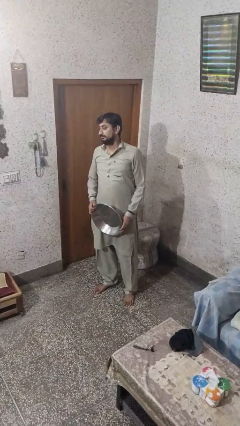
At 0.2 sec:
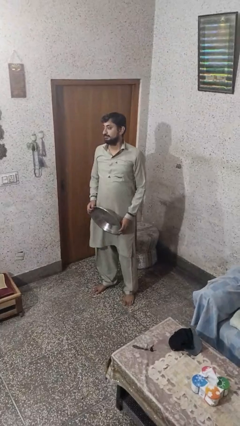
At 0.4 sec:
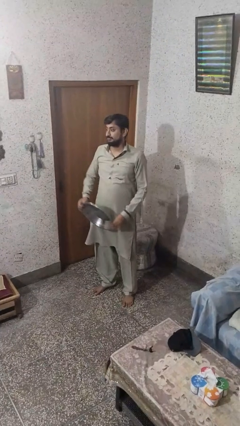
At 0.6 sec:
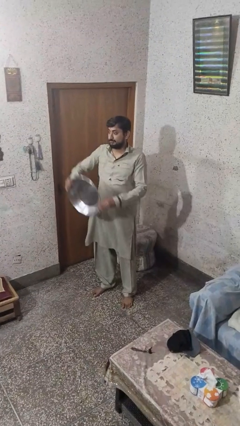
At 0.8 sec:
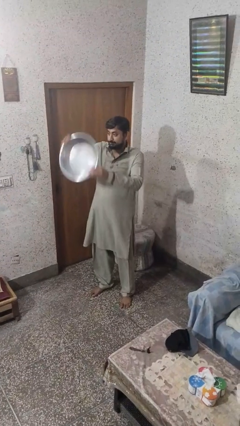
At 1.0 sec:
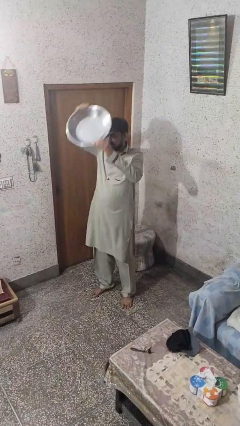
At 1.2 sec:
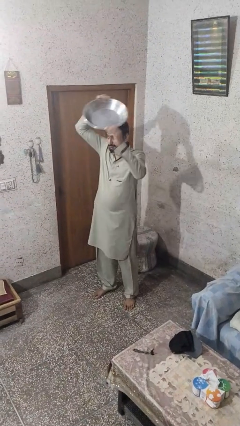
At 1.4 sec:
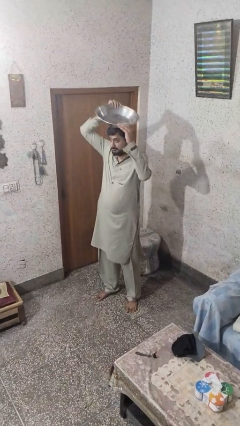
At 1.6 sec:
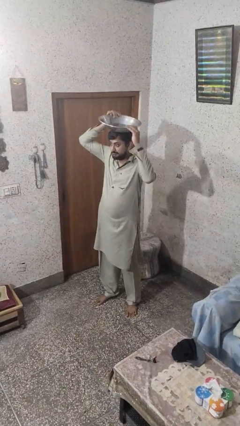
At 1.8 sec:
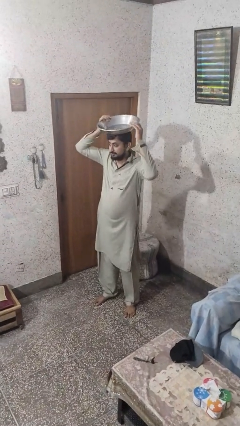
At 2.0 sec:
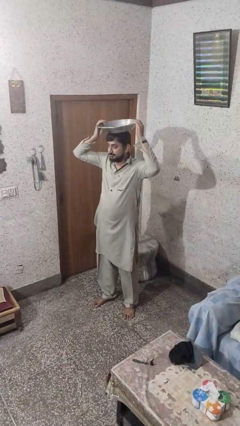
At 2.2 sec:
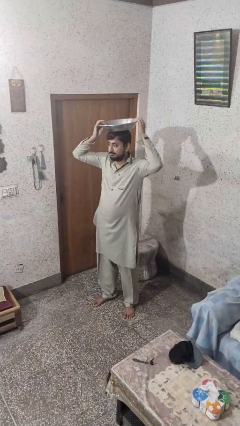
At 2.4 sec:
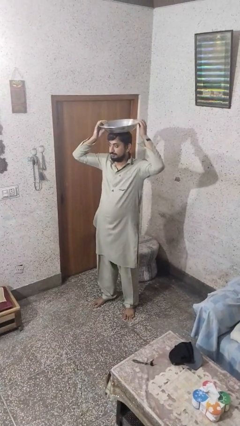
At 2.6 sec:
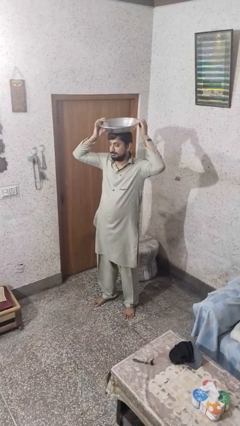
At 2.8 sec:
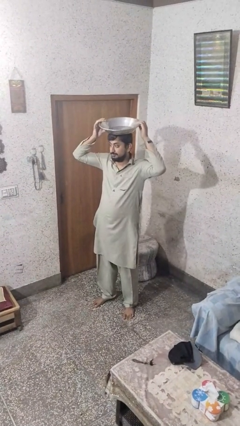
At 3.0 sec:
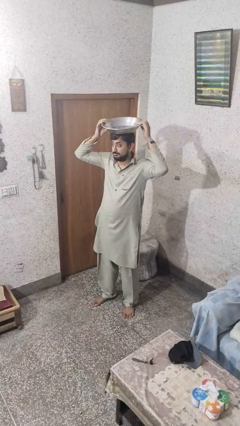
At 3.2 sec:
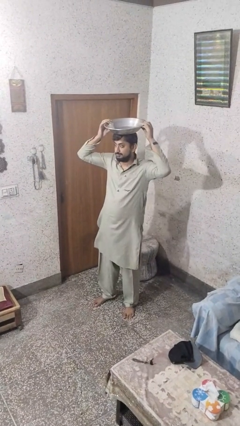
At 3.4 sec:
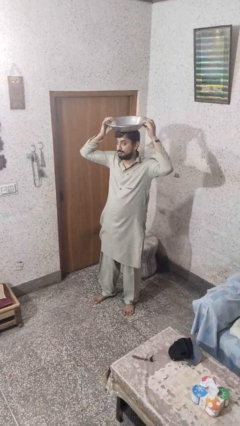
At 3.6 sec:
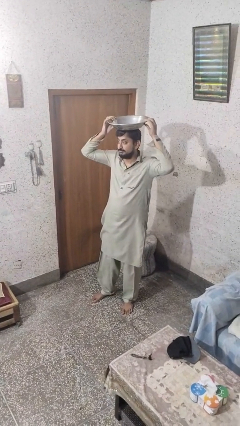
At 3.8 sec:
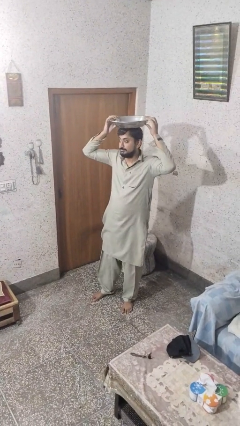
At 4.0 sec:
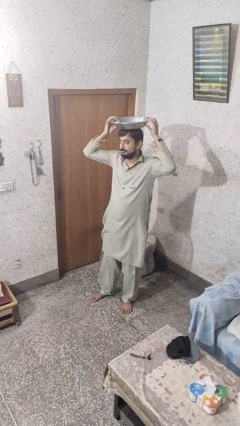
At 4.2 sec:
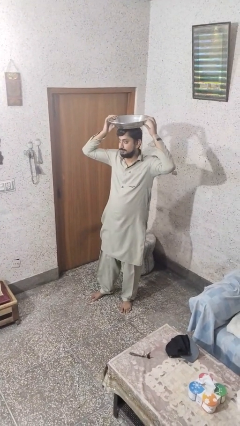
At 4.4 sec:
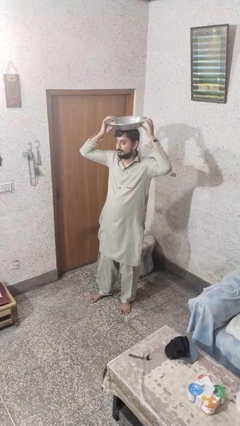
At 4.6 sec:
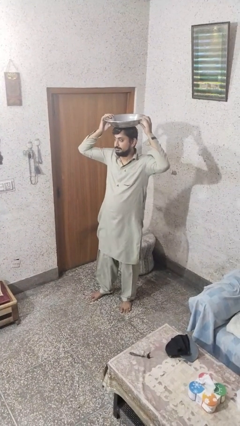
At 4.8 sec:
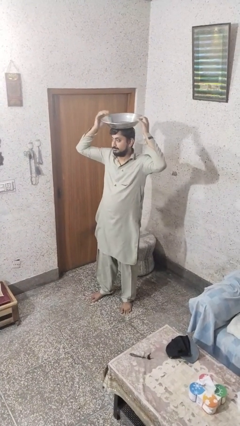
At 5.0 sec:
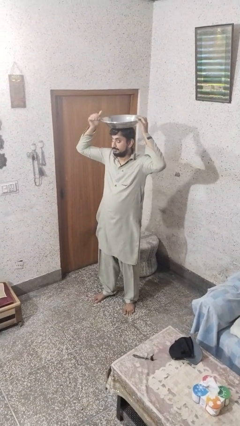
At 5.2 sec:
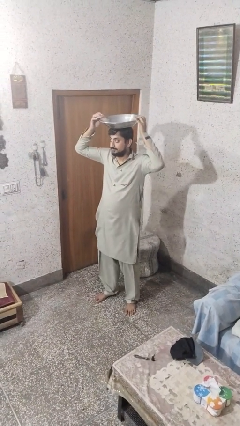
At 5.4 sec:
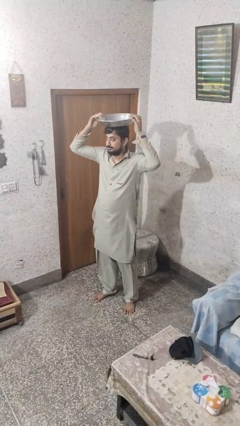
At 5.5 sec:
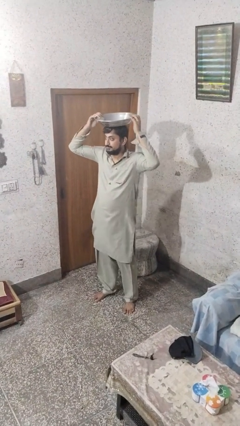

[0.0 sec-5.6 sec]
person holds object above head

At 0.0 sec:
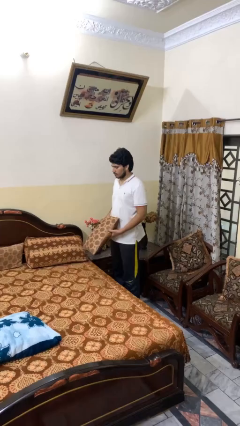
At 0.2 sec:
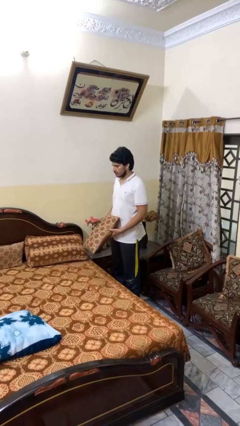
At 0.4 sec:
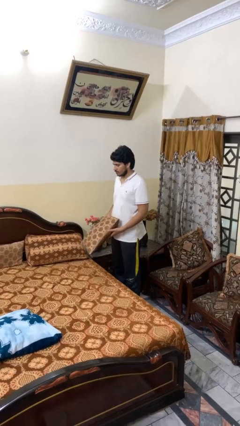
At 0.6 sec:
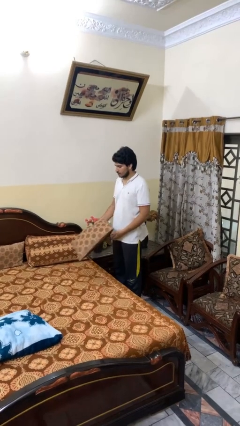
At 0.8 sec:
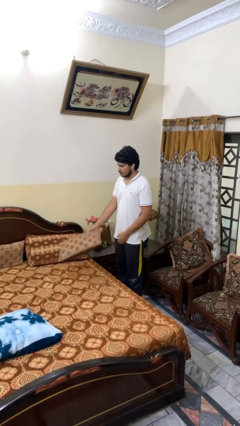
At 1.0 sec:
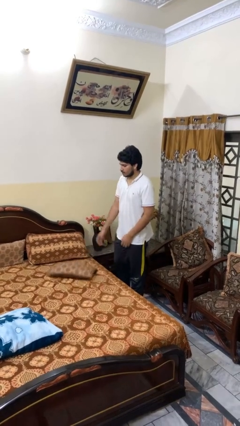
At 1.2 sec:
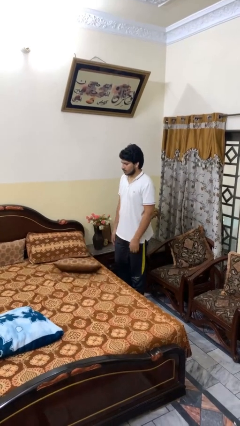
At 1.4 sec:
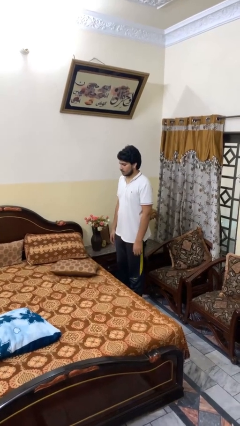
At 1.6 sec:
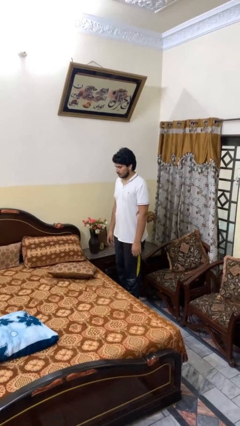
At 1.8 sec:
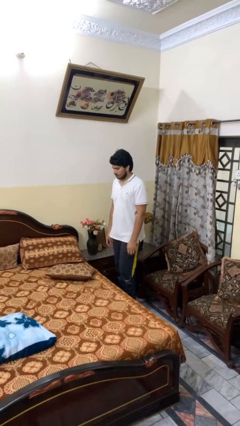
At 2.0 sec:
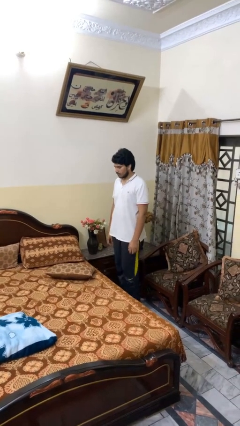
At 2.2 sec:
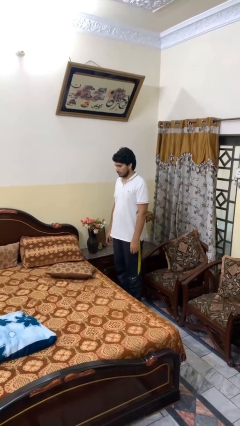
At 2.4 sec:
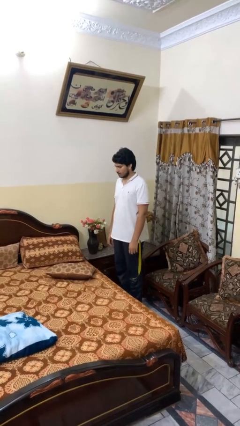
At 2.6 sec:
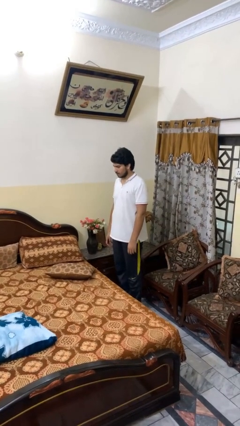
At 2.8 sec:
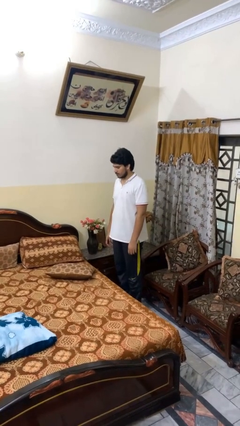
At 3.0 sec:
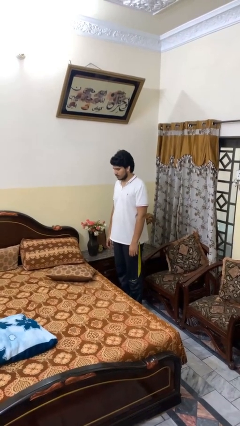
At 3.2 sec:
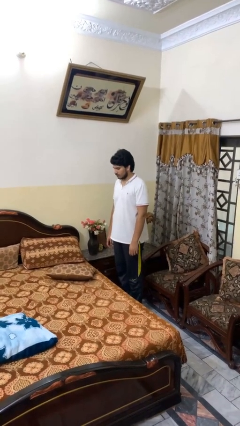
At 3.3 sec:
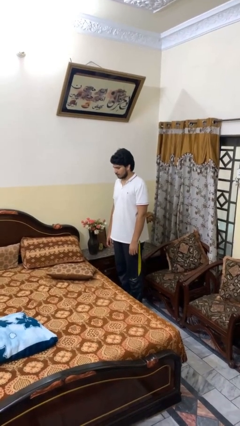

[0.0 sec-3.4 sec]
person puts down object on bed

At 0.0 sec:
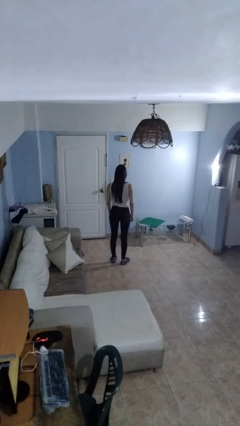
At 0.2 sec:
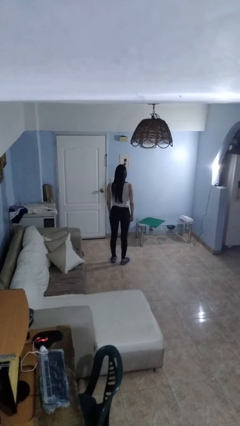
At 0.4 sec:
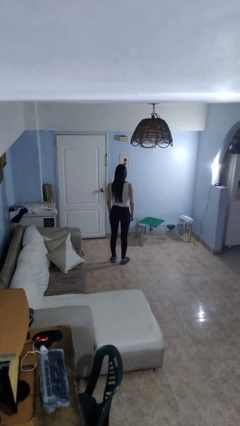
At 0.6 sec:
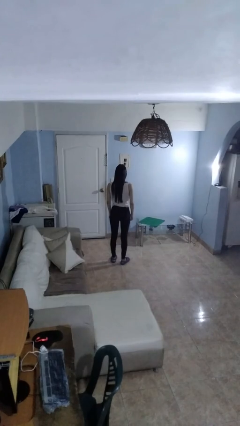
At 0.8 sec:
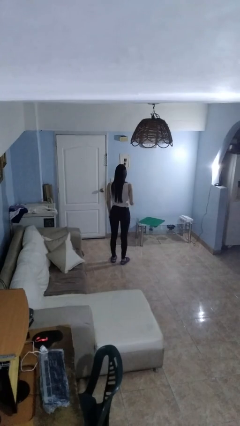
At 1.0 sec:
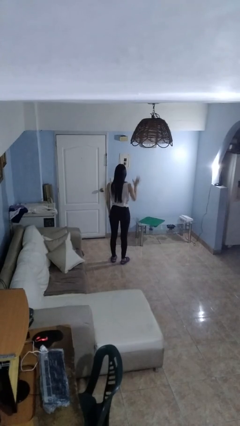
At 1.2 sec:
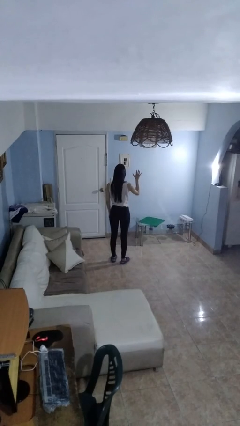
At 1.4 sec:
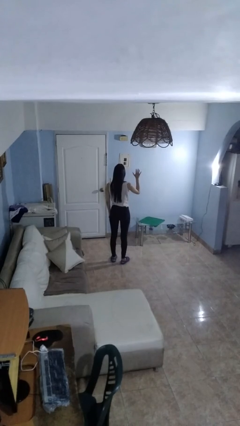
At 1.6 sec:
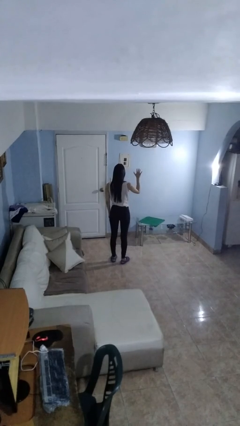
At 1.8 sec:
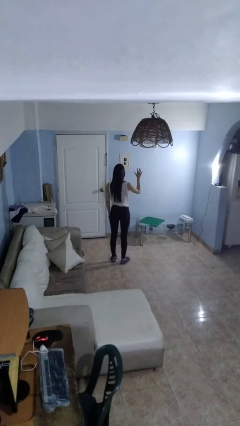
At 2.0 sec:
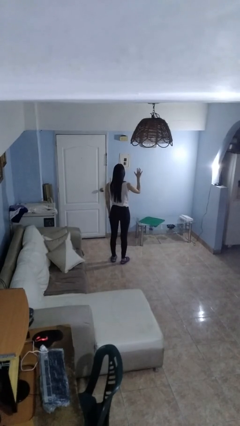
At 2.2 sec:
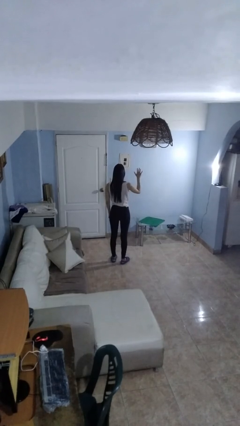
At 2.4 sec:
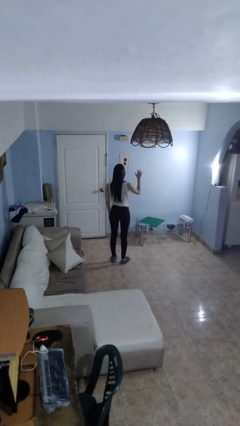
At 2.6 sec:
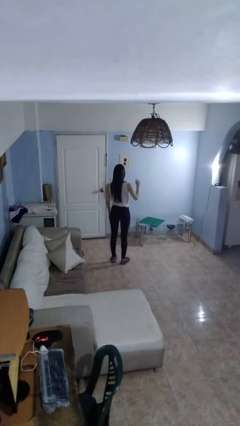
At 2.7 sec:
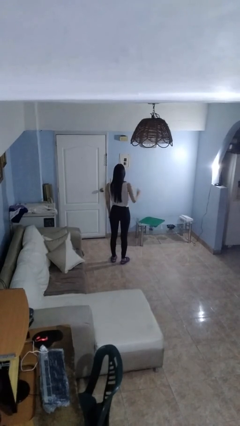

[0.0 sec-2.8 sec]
person gestures number five

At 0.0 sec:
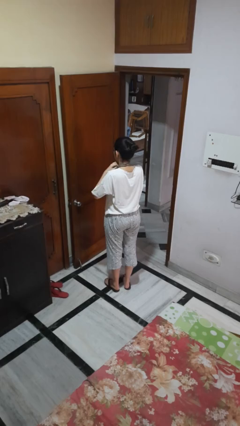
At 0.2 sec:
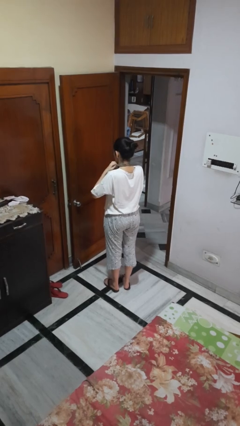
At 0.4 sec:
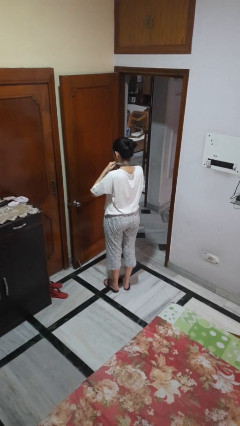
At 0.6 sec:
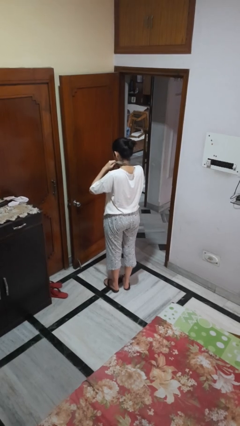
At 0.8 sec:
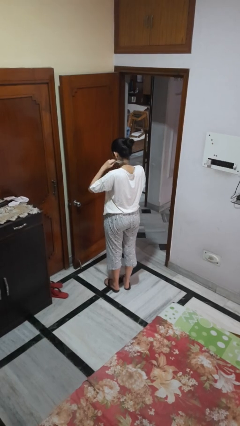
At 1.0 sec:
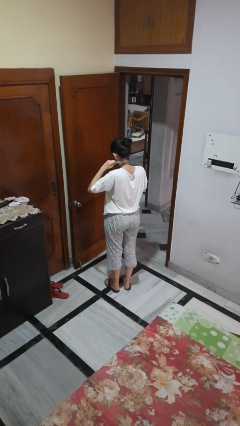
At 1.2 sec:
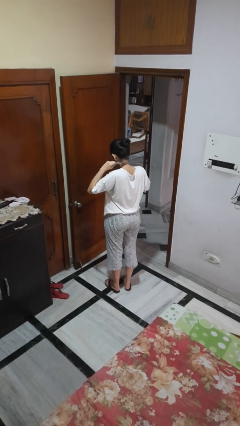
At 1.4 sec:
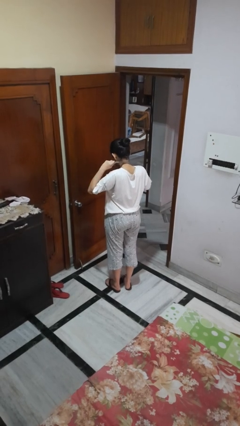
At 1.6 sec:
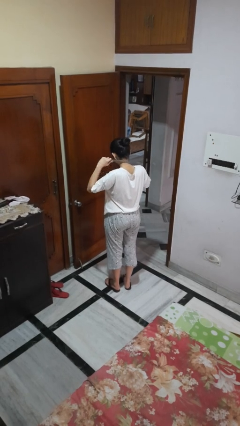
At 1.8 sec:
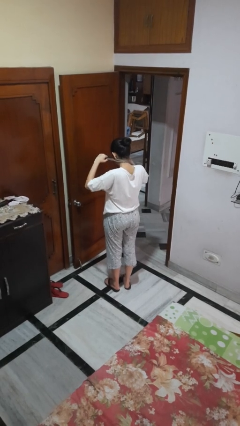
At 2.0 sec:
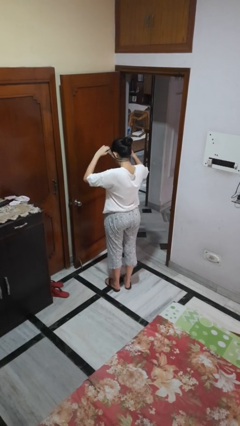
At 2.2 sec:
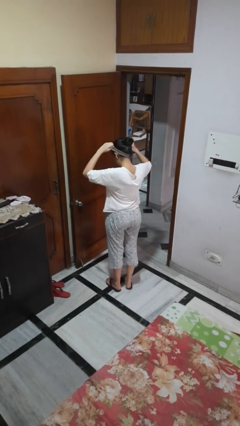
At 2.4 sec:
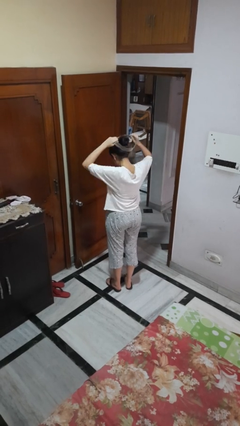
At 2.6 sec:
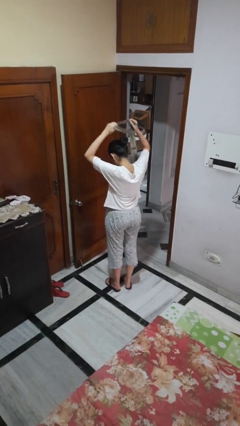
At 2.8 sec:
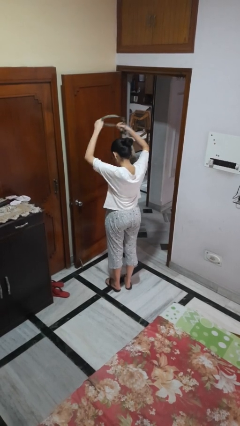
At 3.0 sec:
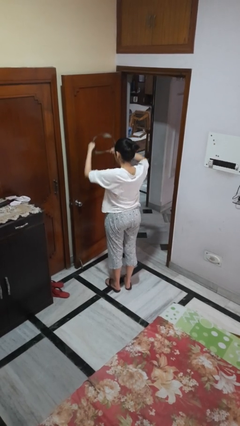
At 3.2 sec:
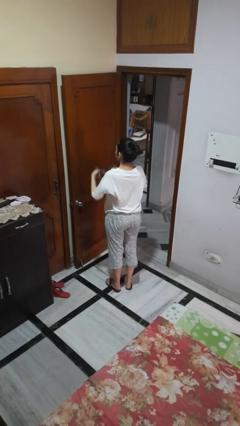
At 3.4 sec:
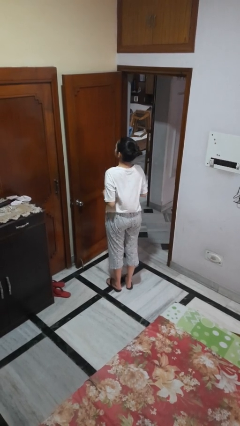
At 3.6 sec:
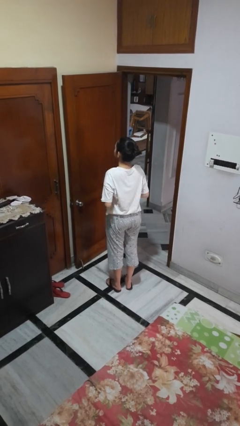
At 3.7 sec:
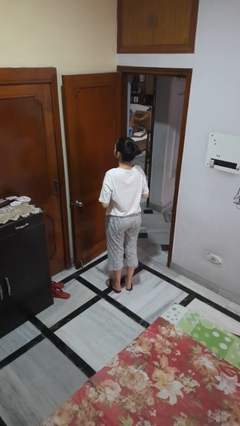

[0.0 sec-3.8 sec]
person takes off necktie

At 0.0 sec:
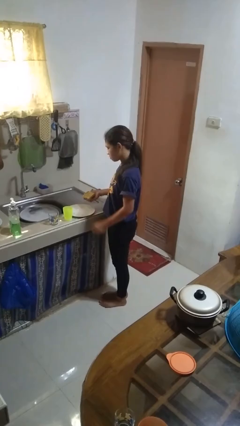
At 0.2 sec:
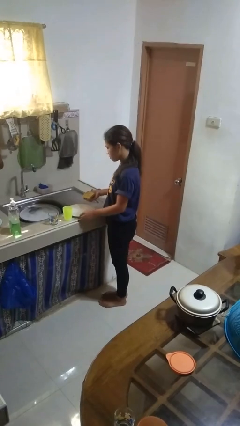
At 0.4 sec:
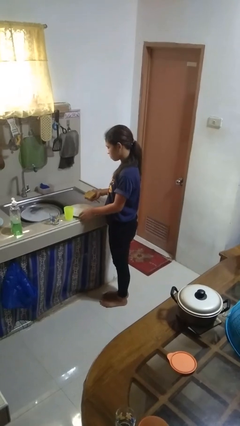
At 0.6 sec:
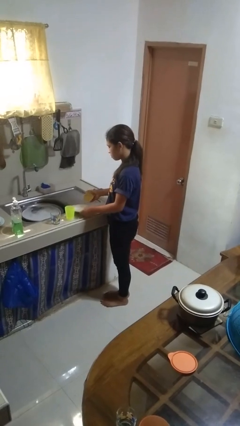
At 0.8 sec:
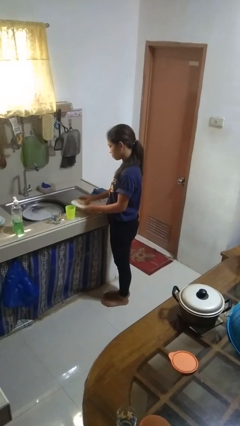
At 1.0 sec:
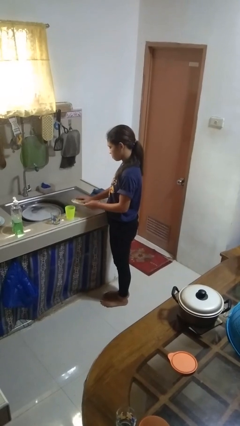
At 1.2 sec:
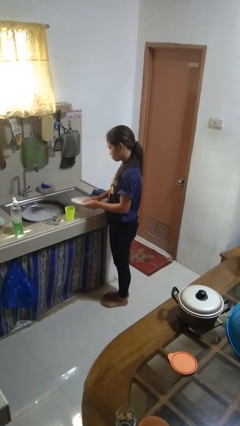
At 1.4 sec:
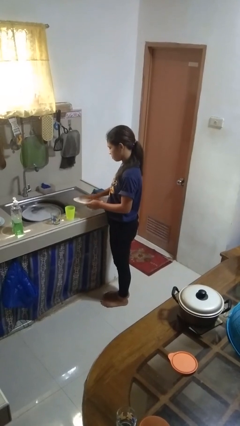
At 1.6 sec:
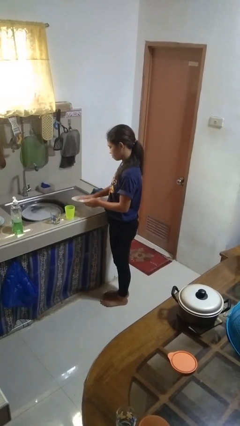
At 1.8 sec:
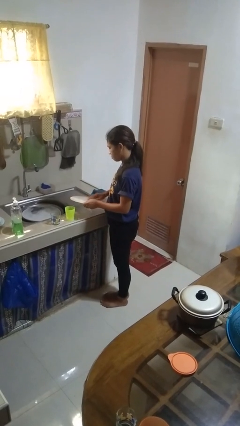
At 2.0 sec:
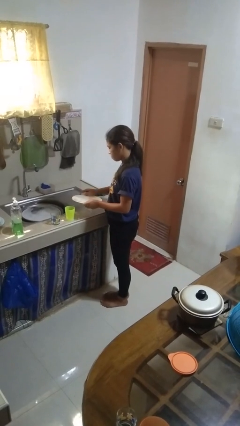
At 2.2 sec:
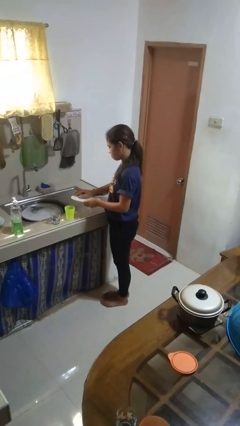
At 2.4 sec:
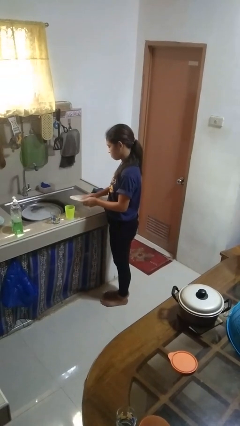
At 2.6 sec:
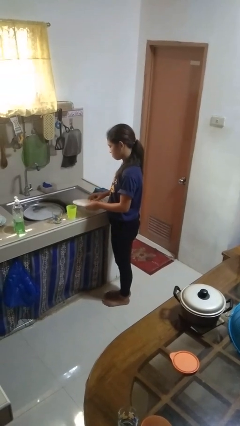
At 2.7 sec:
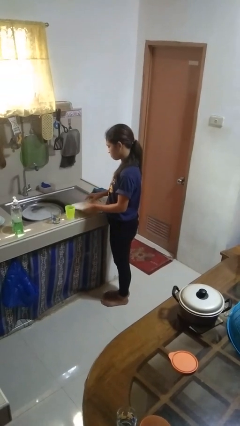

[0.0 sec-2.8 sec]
person washes dish
